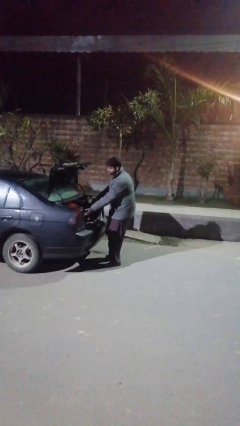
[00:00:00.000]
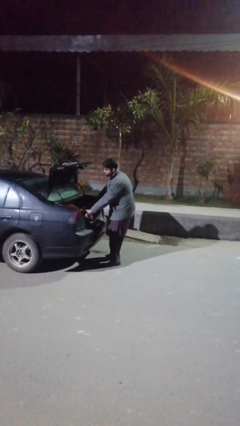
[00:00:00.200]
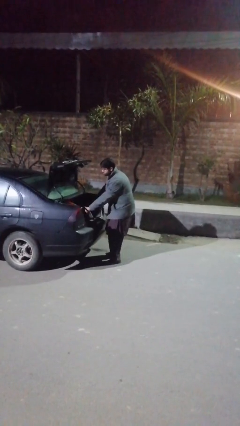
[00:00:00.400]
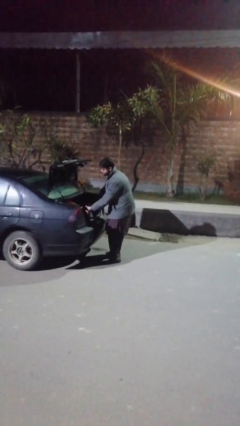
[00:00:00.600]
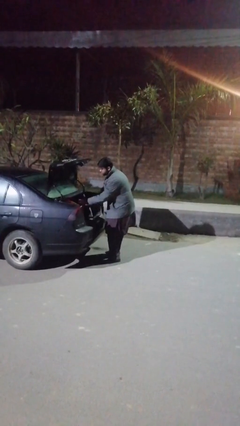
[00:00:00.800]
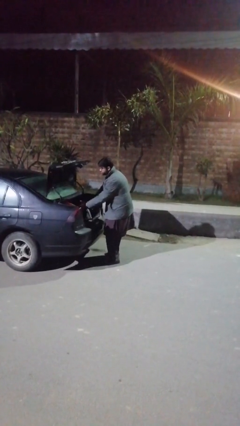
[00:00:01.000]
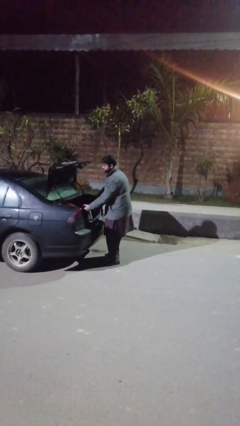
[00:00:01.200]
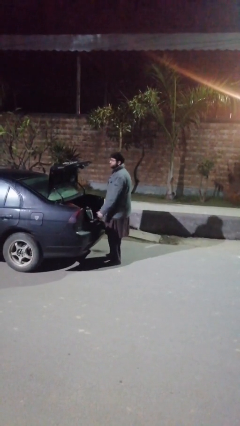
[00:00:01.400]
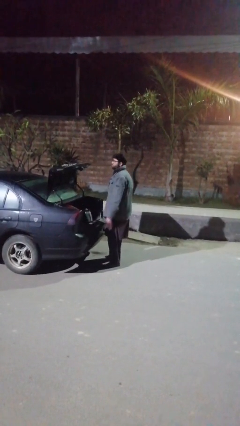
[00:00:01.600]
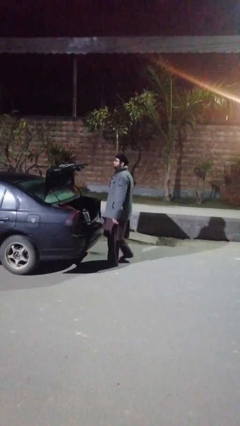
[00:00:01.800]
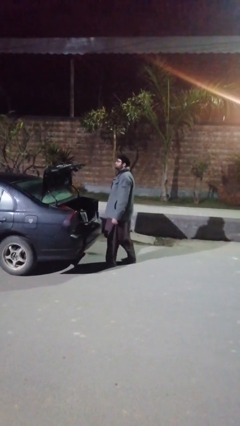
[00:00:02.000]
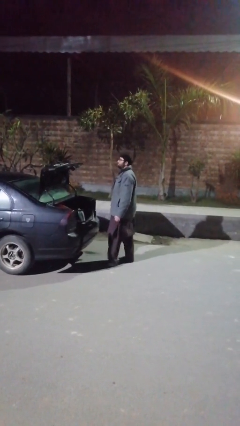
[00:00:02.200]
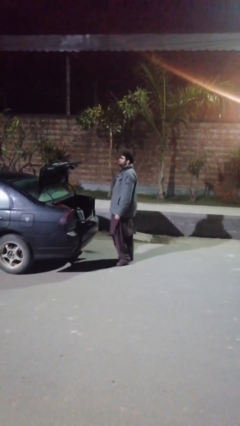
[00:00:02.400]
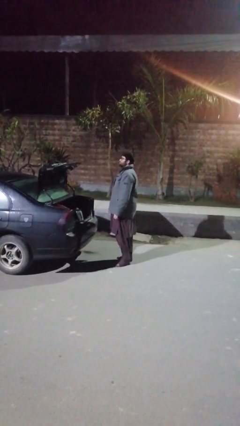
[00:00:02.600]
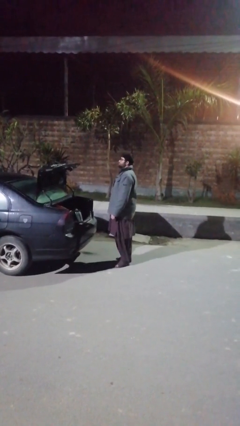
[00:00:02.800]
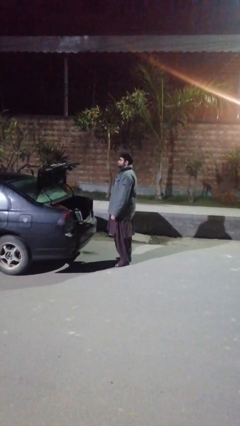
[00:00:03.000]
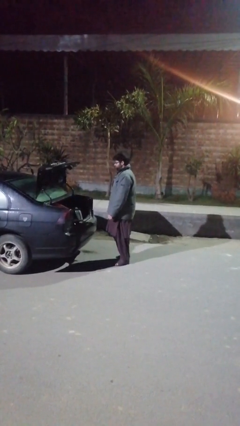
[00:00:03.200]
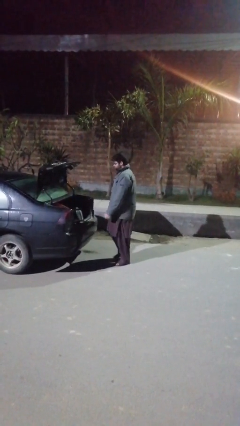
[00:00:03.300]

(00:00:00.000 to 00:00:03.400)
person loads car

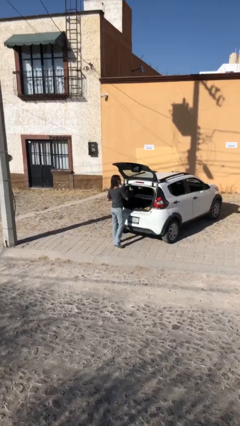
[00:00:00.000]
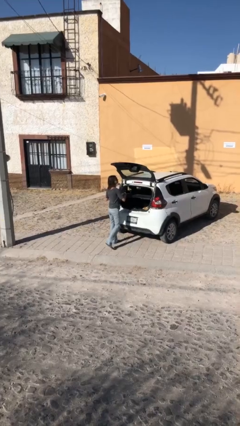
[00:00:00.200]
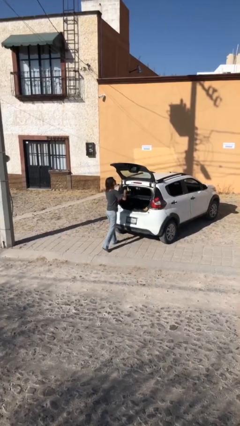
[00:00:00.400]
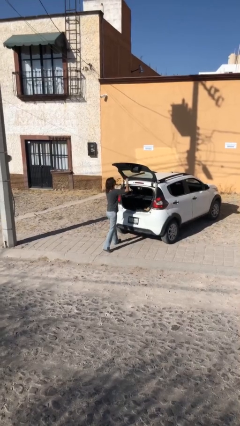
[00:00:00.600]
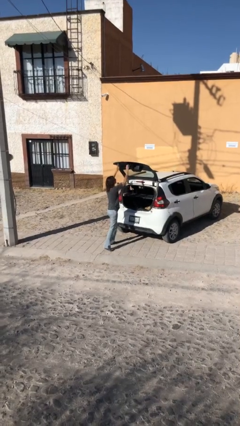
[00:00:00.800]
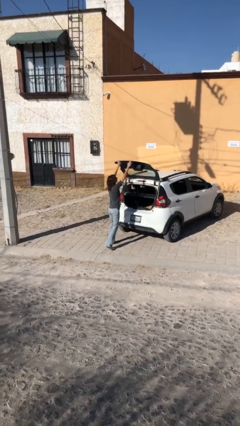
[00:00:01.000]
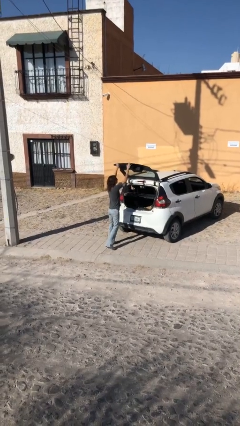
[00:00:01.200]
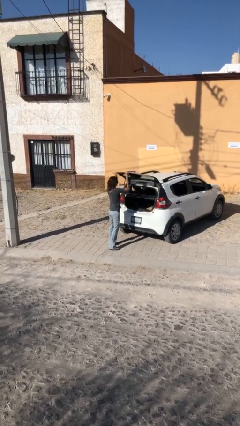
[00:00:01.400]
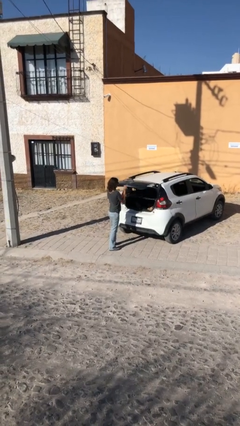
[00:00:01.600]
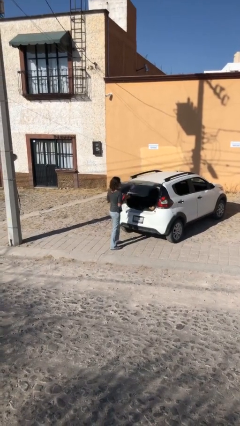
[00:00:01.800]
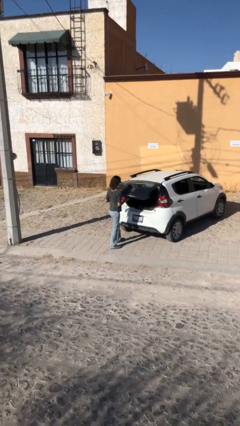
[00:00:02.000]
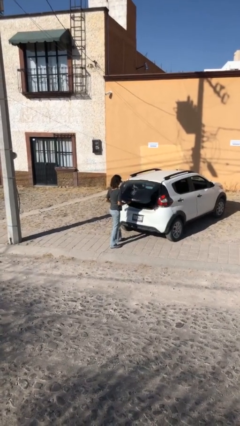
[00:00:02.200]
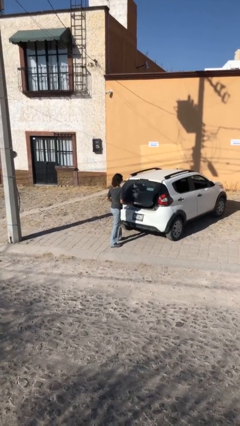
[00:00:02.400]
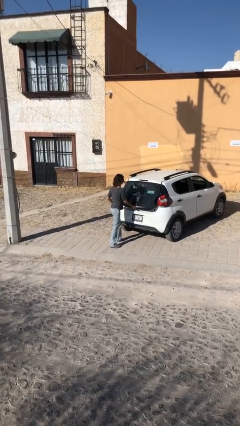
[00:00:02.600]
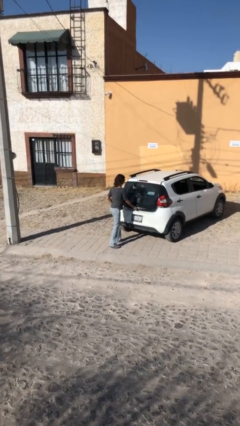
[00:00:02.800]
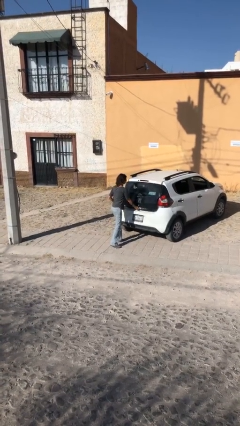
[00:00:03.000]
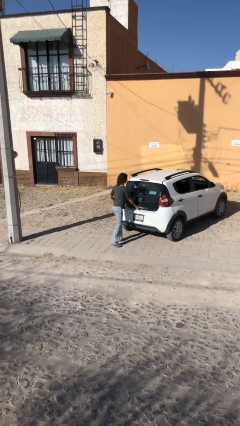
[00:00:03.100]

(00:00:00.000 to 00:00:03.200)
person closes car trunk

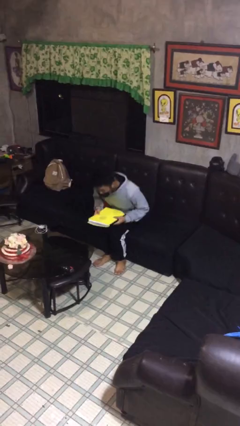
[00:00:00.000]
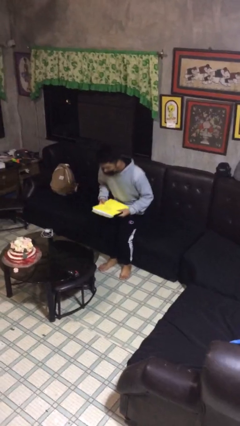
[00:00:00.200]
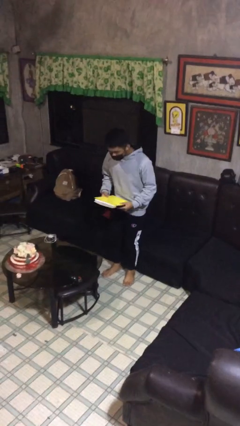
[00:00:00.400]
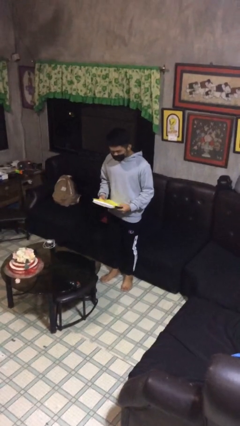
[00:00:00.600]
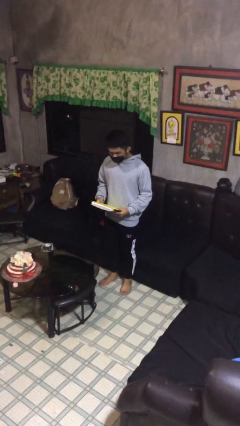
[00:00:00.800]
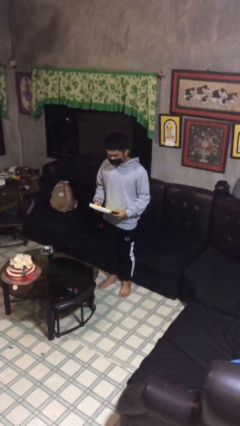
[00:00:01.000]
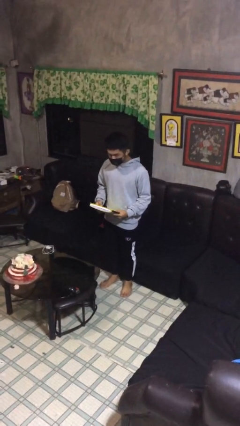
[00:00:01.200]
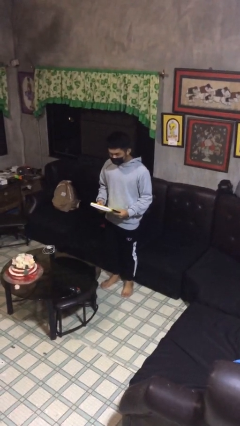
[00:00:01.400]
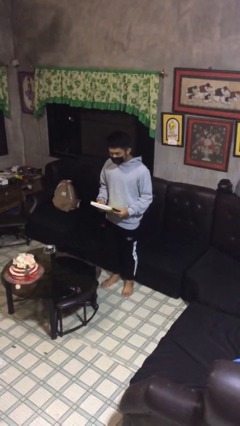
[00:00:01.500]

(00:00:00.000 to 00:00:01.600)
person stands up

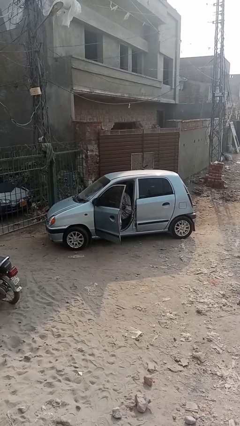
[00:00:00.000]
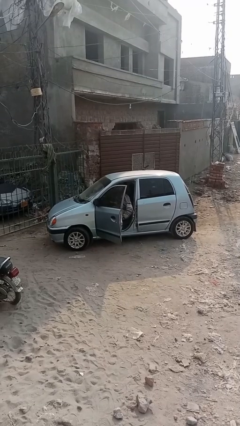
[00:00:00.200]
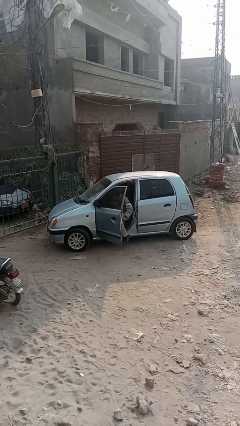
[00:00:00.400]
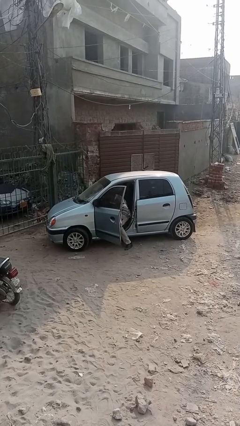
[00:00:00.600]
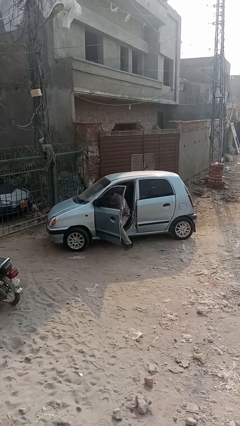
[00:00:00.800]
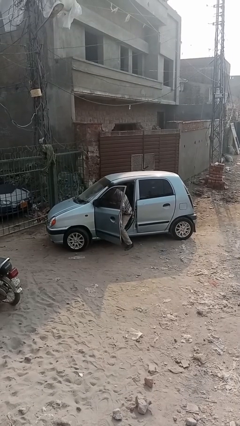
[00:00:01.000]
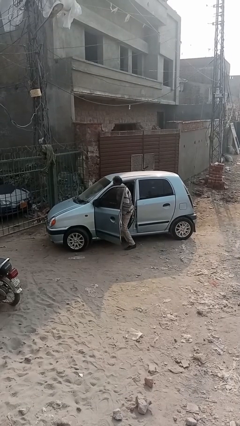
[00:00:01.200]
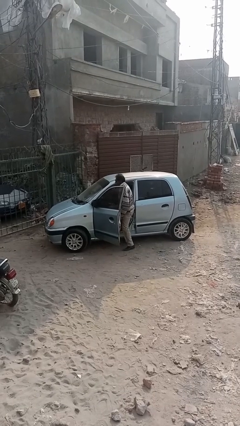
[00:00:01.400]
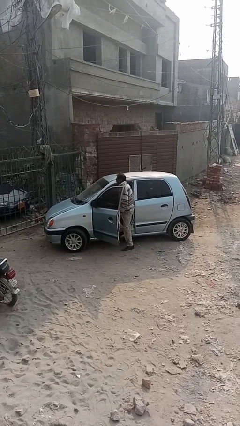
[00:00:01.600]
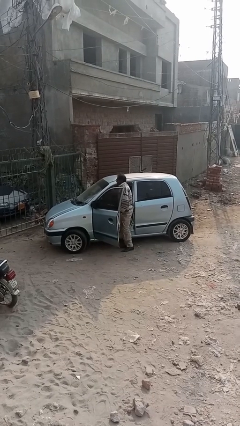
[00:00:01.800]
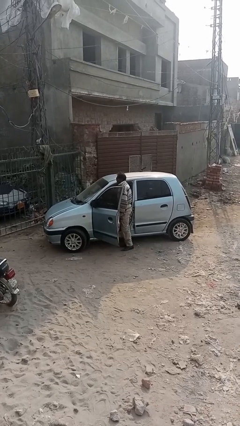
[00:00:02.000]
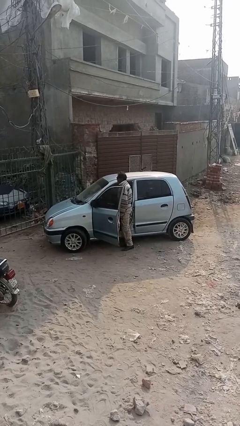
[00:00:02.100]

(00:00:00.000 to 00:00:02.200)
person exits car

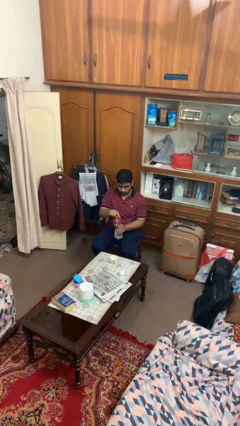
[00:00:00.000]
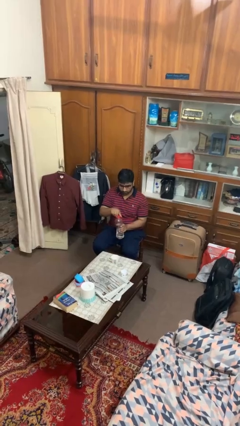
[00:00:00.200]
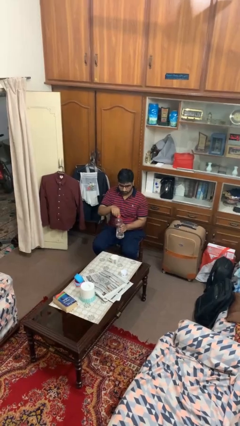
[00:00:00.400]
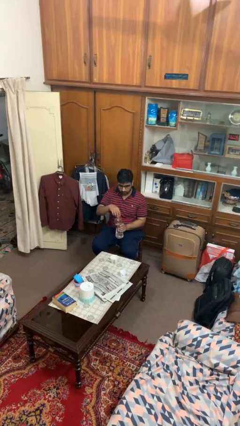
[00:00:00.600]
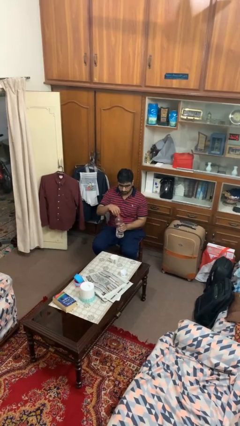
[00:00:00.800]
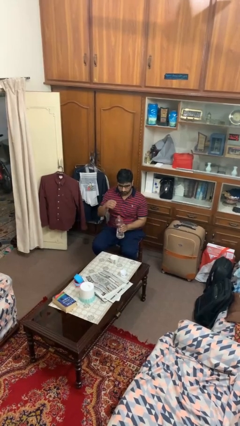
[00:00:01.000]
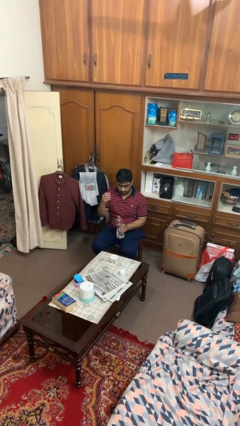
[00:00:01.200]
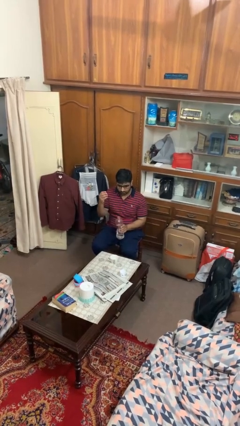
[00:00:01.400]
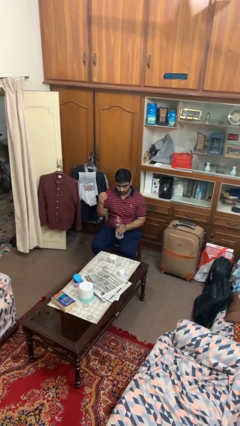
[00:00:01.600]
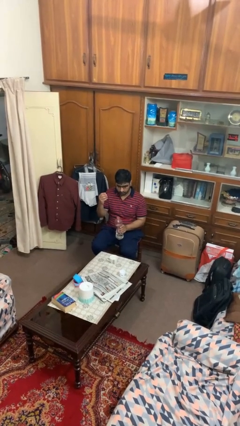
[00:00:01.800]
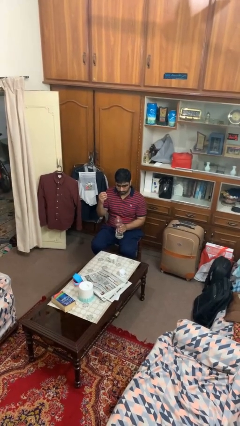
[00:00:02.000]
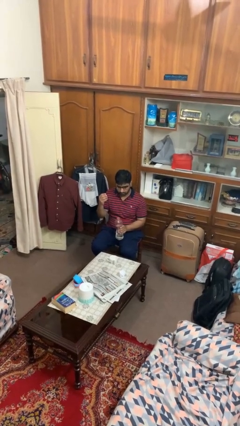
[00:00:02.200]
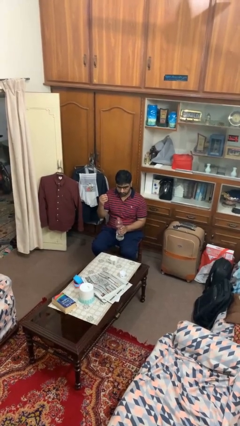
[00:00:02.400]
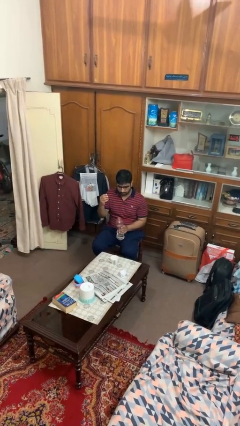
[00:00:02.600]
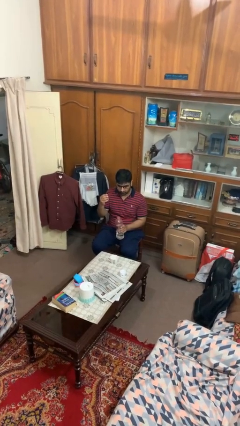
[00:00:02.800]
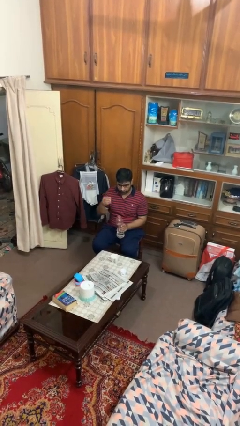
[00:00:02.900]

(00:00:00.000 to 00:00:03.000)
person unscrews lid from bottle

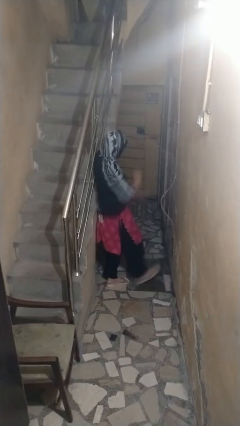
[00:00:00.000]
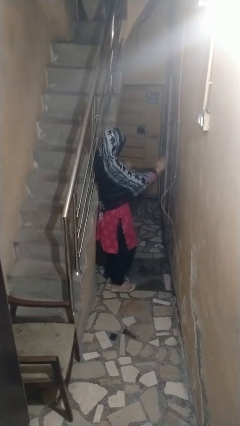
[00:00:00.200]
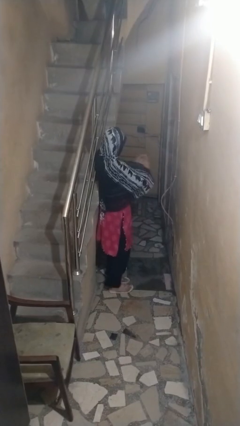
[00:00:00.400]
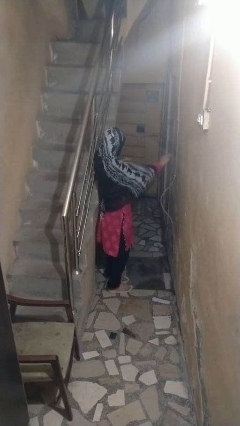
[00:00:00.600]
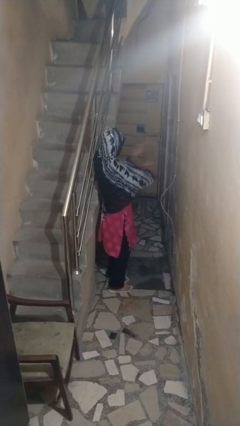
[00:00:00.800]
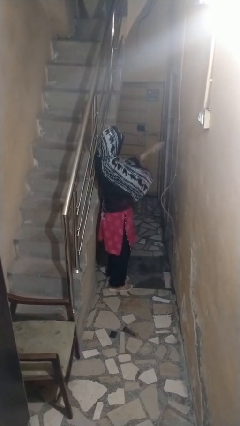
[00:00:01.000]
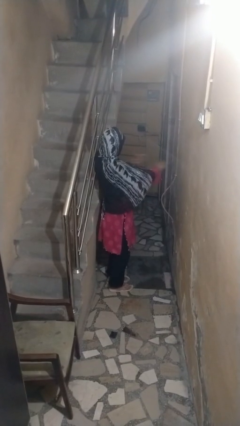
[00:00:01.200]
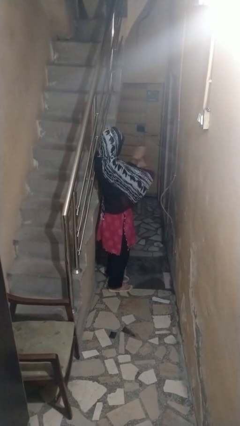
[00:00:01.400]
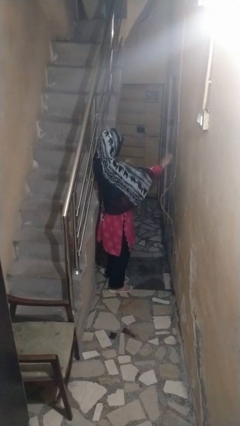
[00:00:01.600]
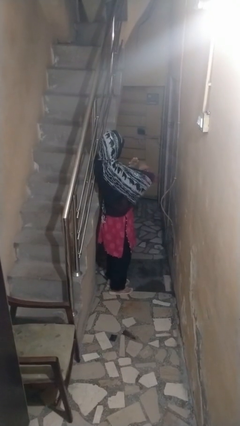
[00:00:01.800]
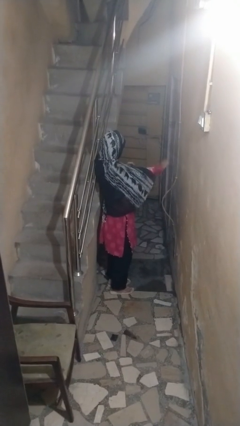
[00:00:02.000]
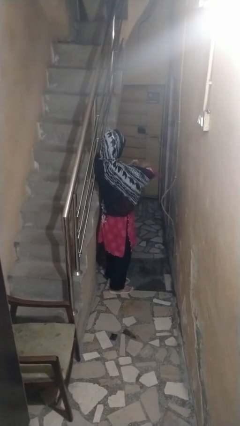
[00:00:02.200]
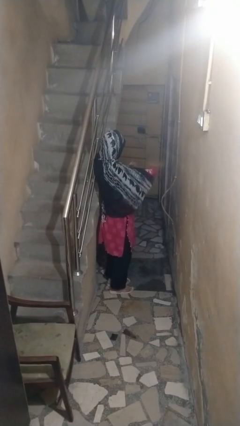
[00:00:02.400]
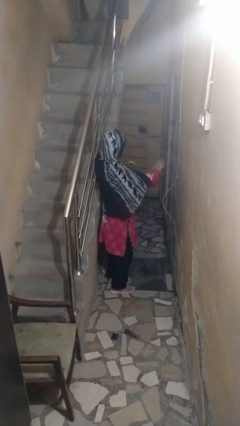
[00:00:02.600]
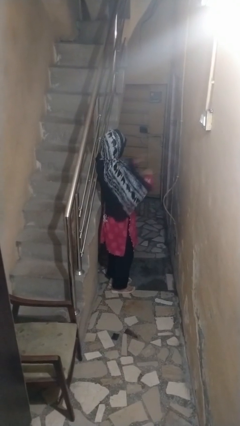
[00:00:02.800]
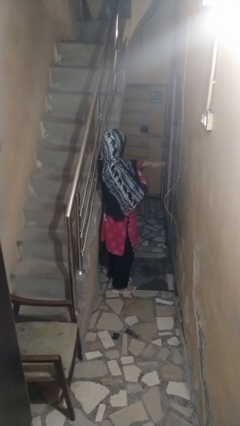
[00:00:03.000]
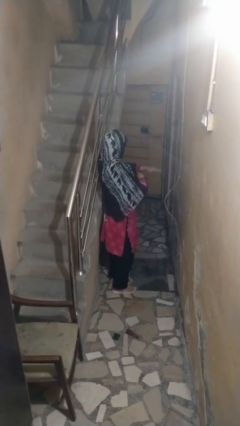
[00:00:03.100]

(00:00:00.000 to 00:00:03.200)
person karate chop

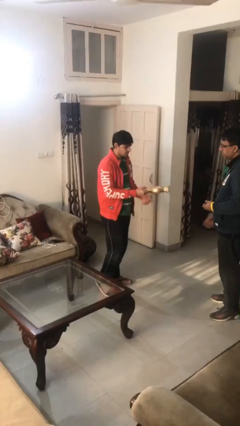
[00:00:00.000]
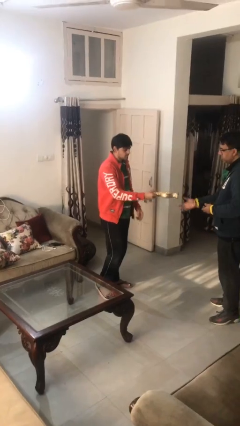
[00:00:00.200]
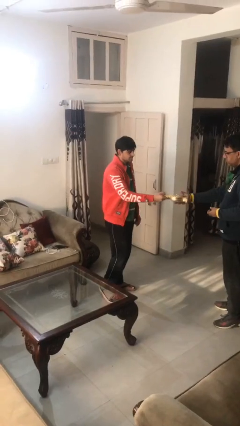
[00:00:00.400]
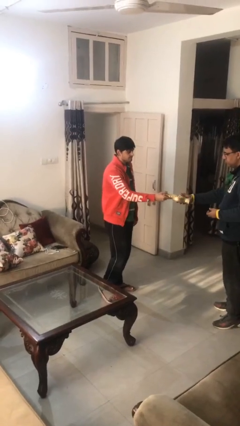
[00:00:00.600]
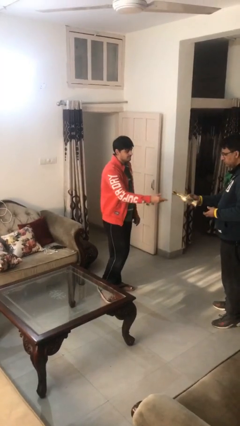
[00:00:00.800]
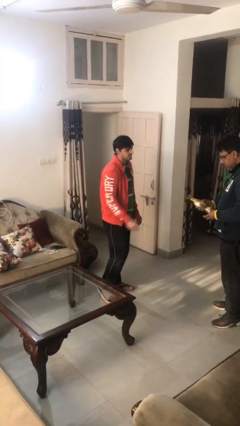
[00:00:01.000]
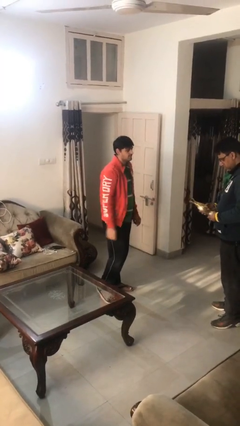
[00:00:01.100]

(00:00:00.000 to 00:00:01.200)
person transfers object to person
